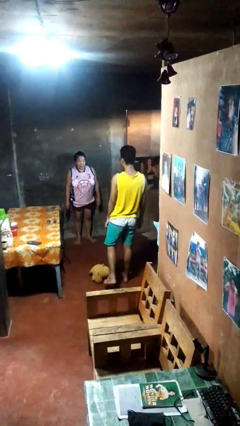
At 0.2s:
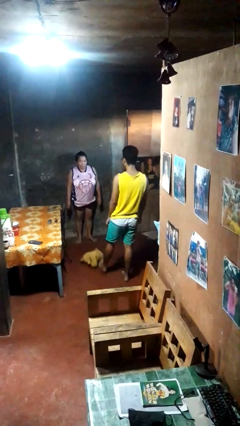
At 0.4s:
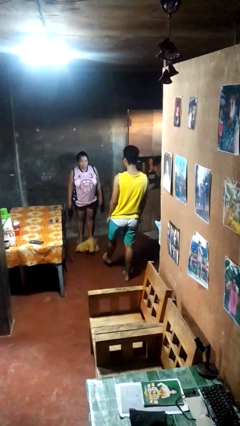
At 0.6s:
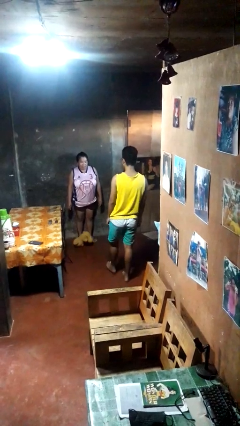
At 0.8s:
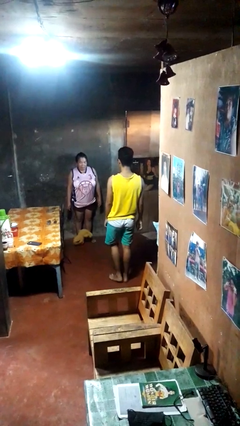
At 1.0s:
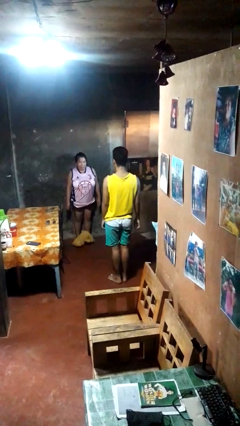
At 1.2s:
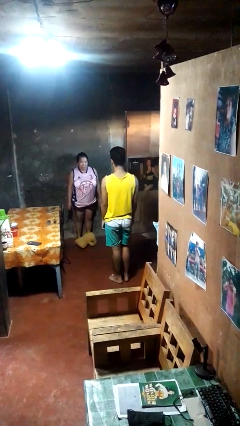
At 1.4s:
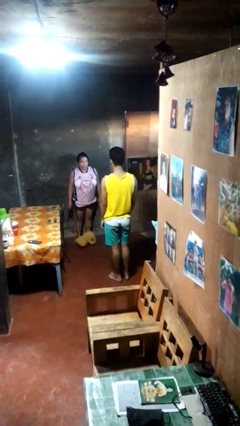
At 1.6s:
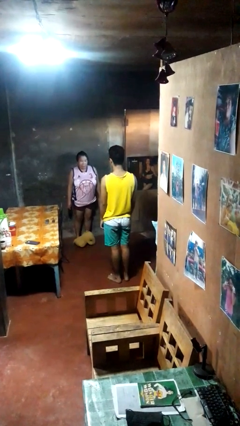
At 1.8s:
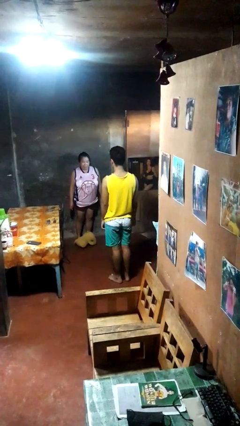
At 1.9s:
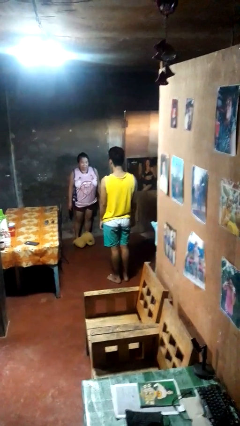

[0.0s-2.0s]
person kicks object to person

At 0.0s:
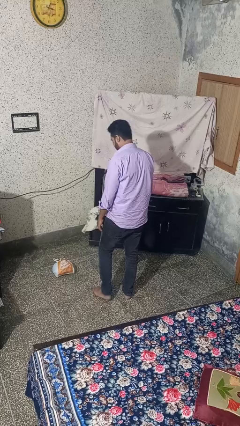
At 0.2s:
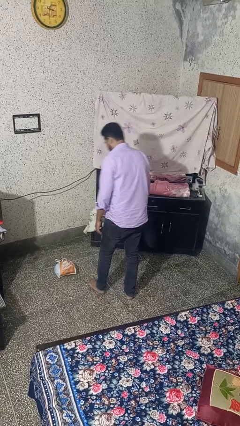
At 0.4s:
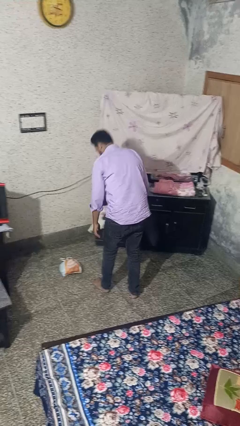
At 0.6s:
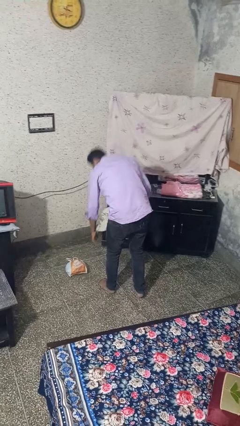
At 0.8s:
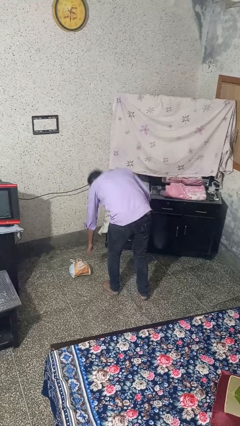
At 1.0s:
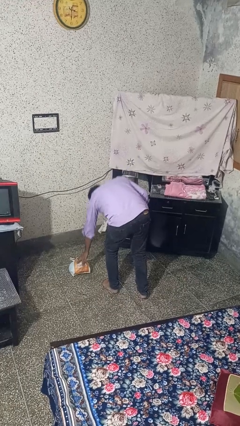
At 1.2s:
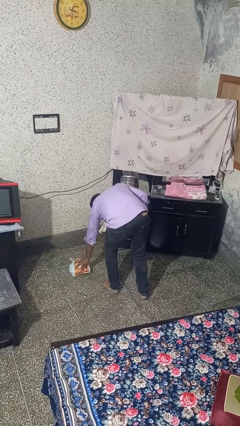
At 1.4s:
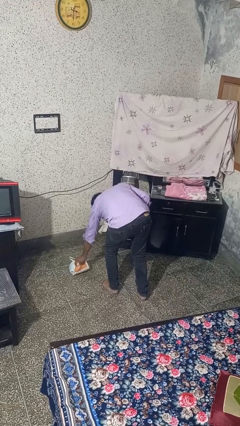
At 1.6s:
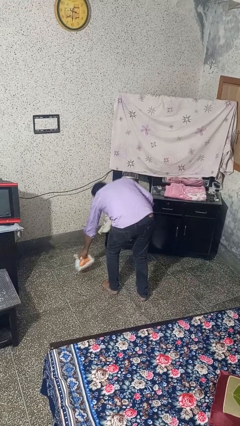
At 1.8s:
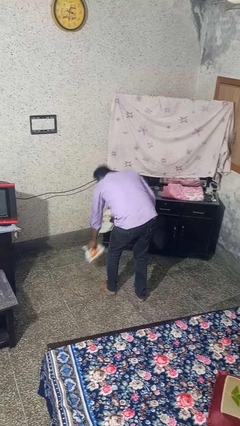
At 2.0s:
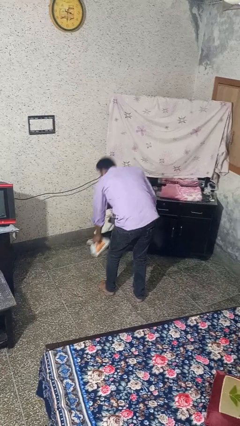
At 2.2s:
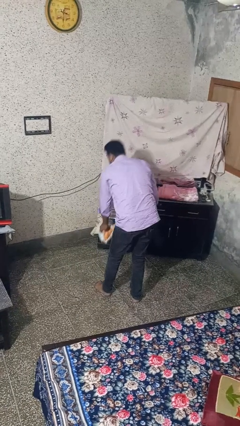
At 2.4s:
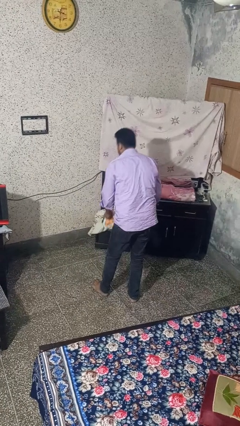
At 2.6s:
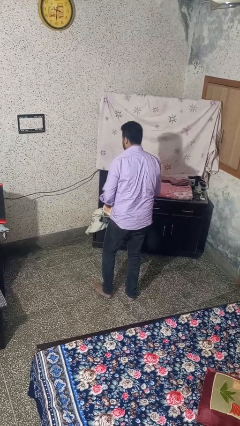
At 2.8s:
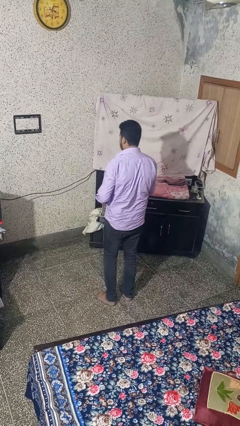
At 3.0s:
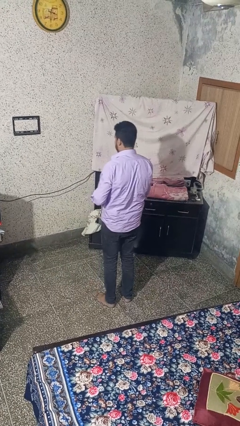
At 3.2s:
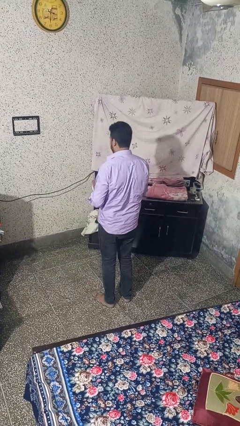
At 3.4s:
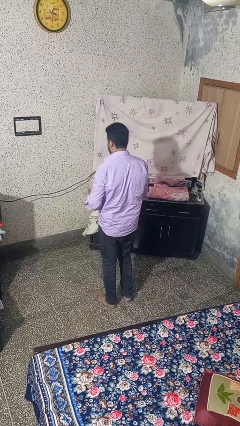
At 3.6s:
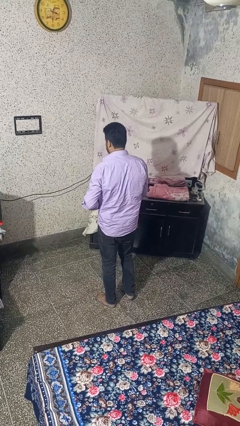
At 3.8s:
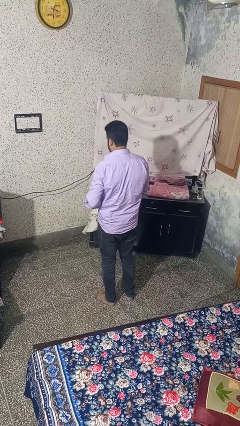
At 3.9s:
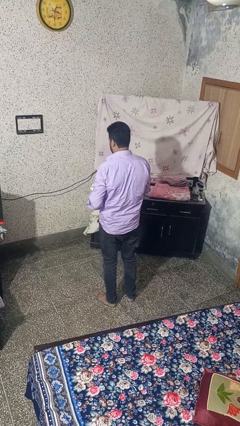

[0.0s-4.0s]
person picks up object from floor

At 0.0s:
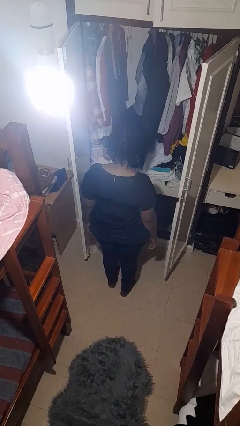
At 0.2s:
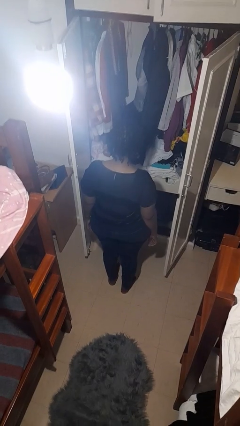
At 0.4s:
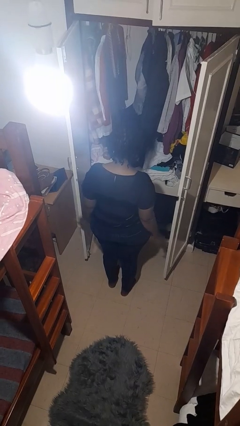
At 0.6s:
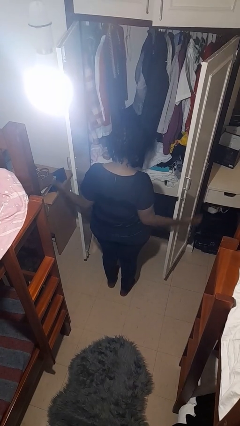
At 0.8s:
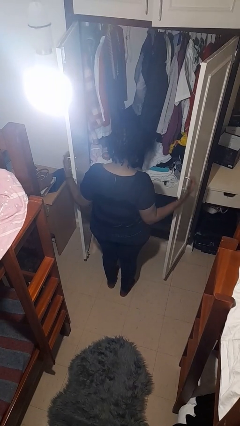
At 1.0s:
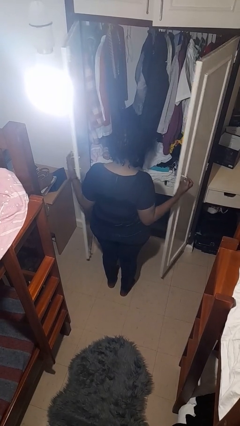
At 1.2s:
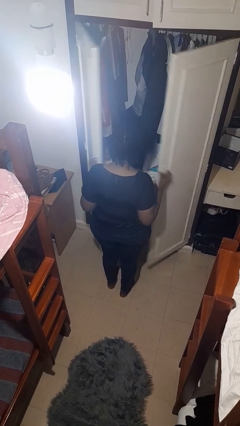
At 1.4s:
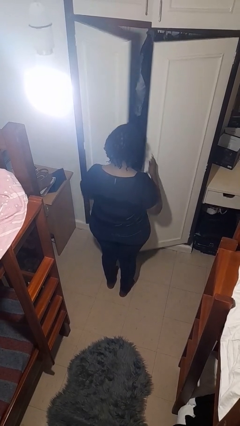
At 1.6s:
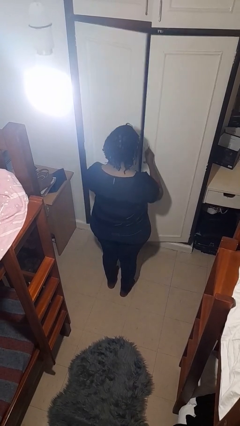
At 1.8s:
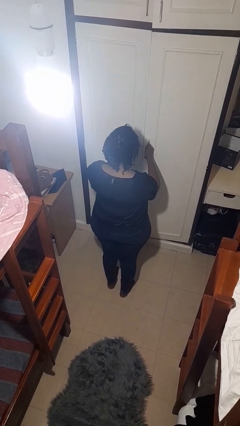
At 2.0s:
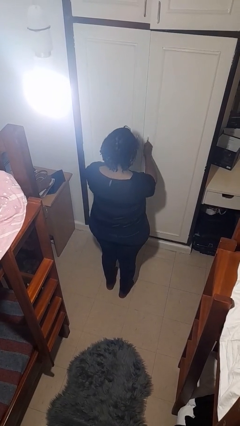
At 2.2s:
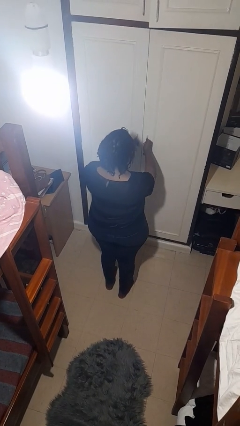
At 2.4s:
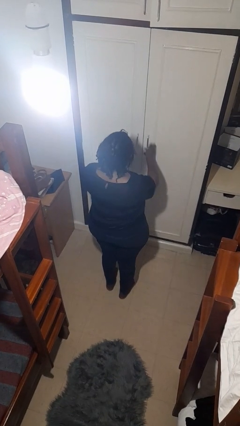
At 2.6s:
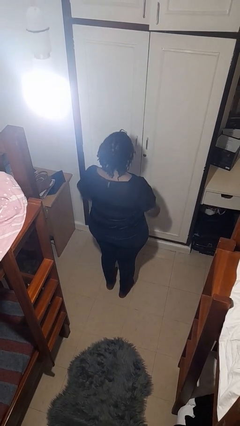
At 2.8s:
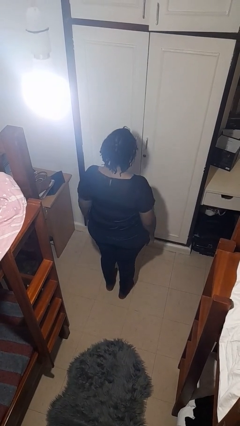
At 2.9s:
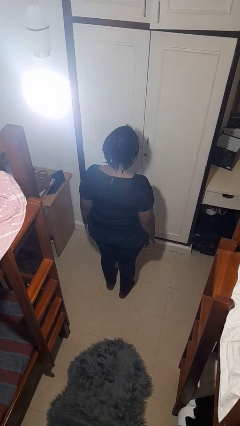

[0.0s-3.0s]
person closes closet door

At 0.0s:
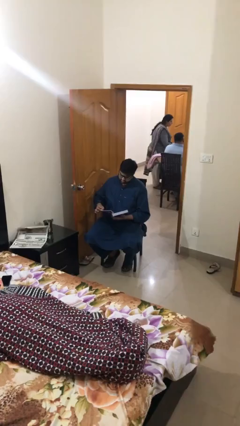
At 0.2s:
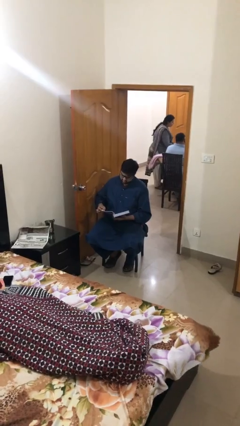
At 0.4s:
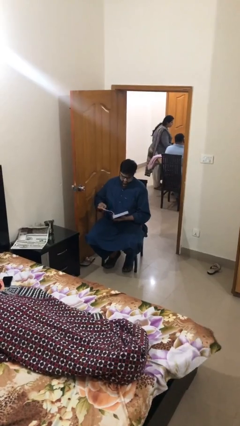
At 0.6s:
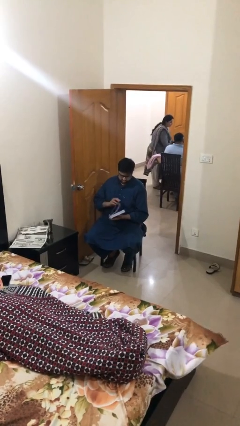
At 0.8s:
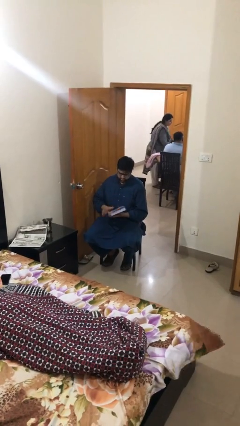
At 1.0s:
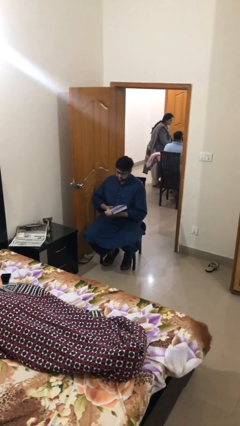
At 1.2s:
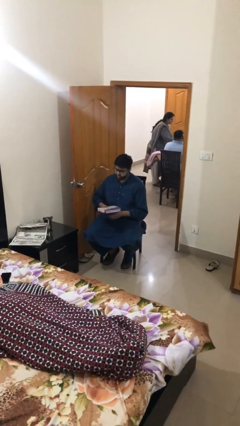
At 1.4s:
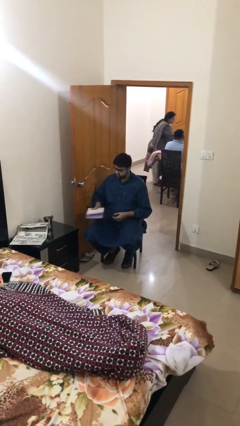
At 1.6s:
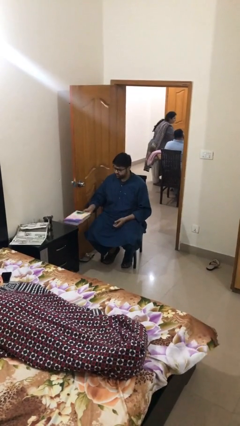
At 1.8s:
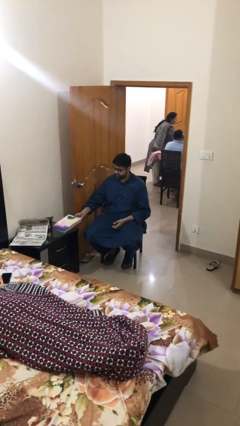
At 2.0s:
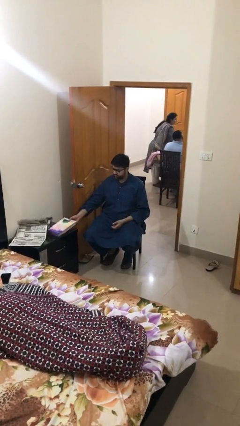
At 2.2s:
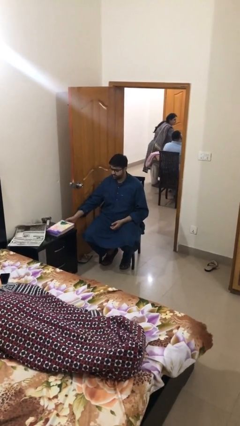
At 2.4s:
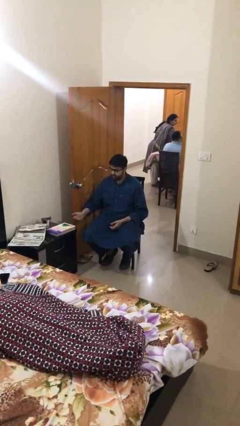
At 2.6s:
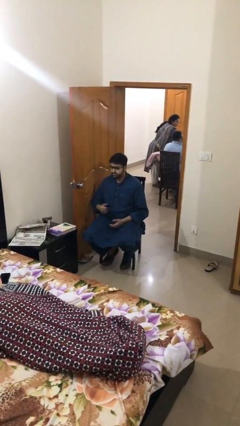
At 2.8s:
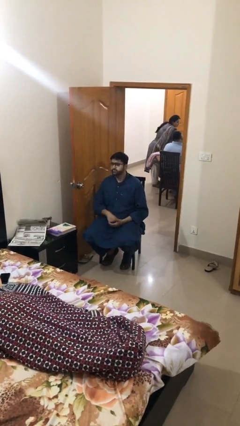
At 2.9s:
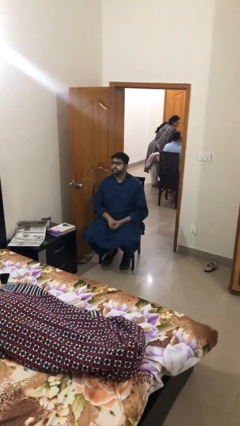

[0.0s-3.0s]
person puts down object on table

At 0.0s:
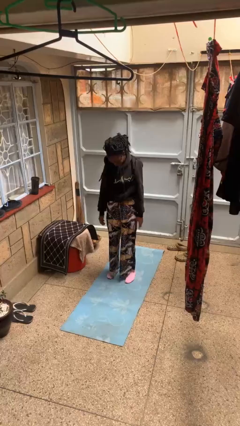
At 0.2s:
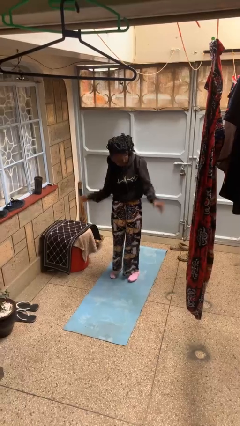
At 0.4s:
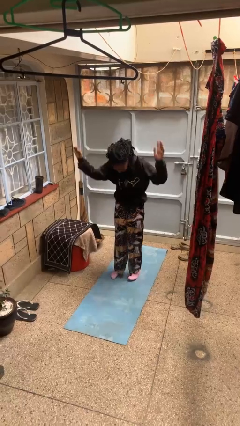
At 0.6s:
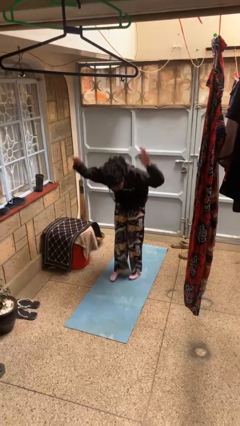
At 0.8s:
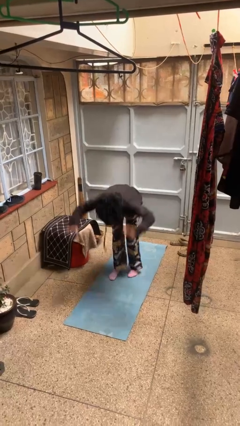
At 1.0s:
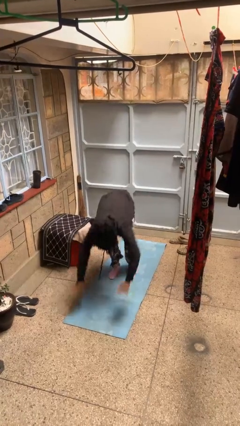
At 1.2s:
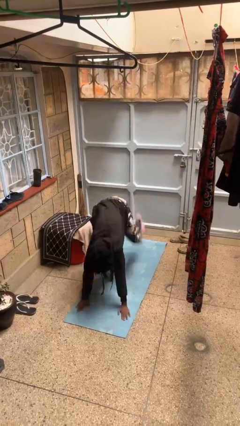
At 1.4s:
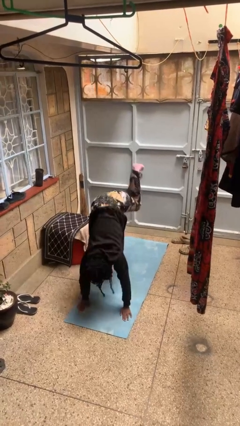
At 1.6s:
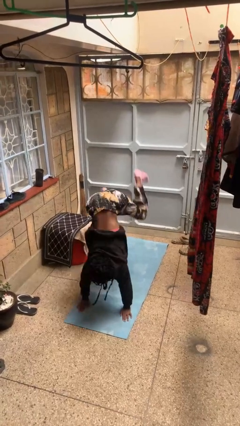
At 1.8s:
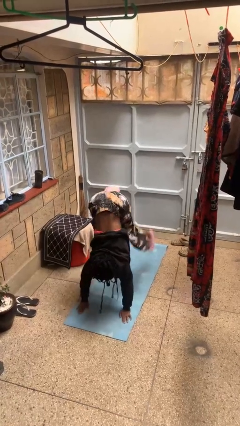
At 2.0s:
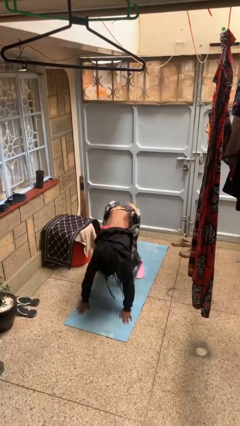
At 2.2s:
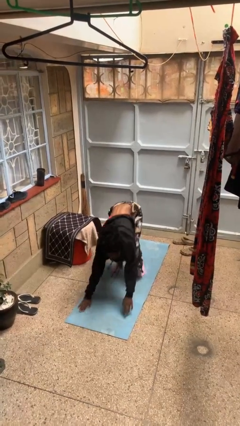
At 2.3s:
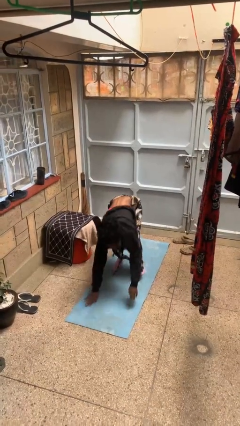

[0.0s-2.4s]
person handstand

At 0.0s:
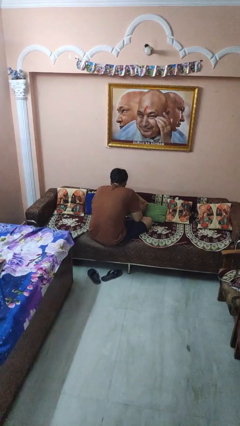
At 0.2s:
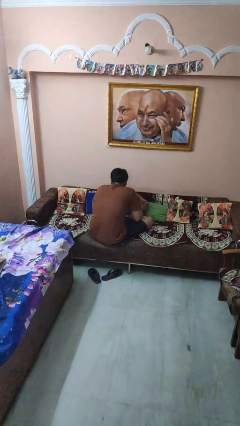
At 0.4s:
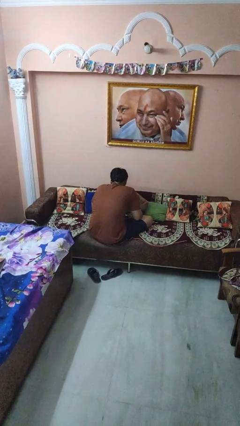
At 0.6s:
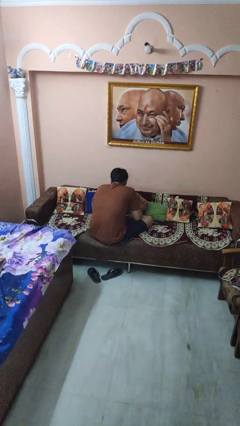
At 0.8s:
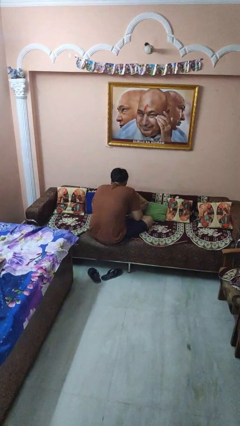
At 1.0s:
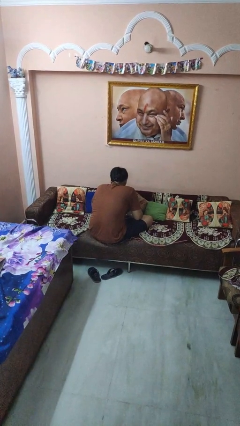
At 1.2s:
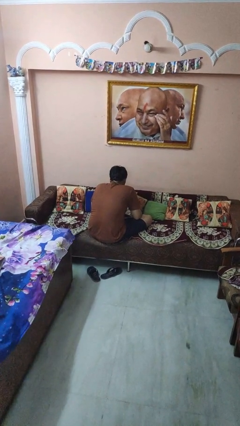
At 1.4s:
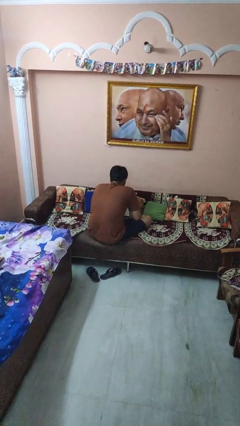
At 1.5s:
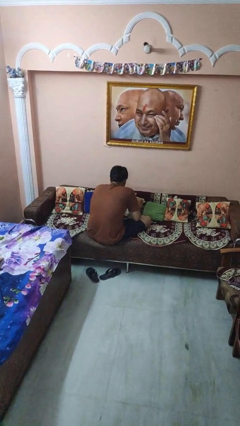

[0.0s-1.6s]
person searches in couch

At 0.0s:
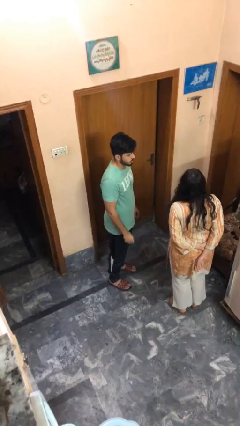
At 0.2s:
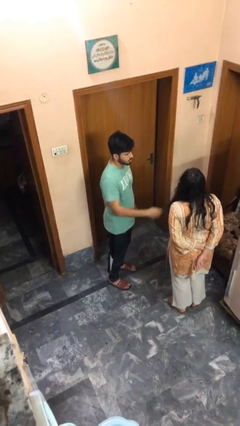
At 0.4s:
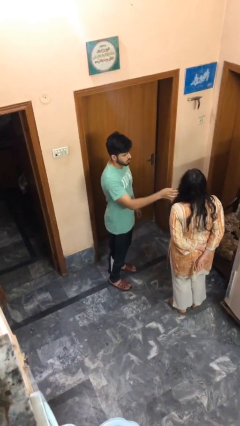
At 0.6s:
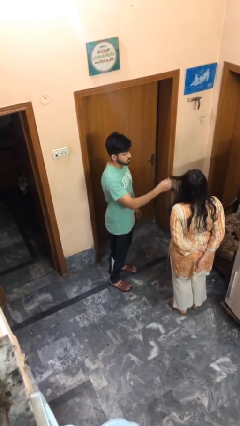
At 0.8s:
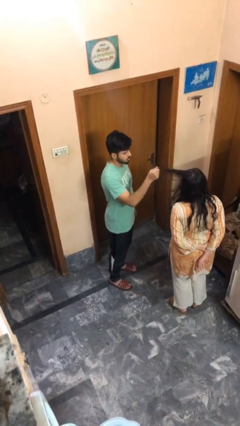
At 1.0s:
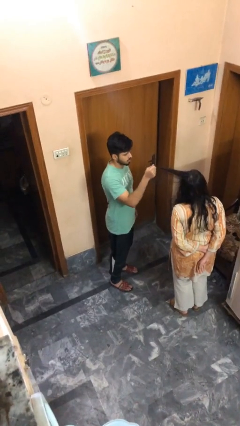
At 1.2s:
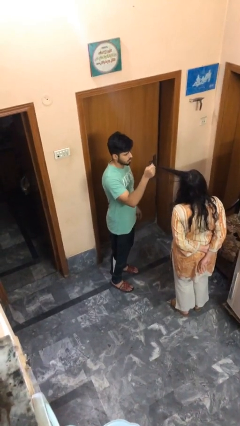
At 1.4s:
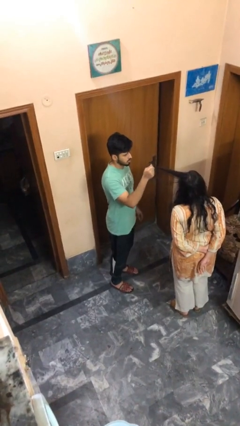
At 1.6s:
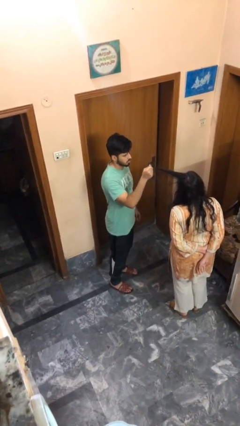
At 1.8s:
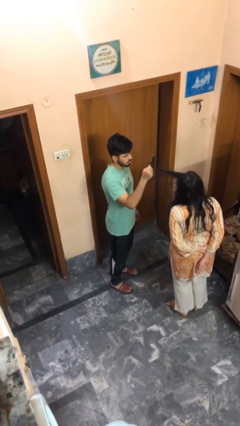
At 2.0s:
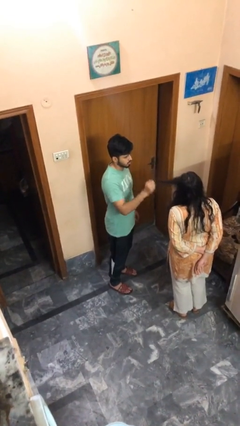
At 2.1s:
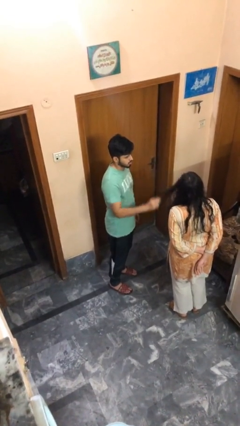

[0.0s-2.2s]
person grabs person by hair
